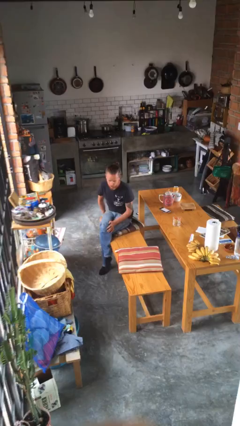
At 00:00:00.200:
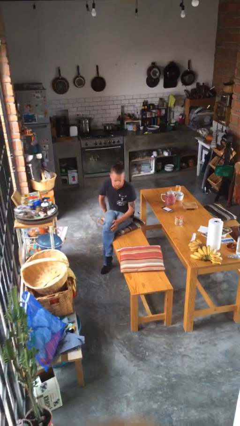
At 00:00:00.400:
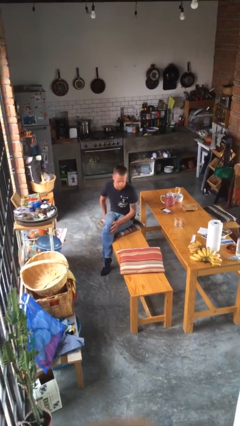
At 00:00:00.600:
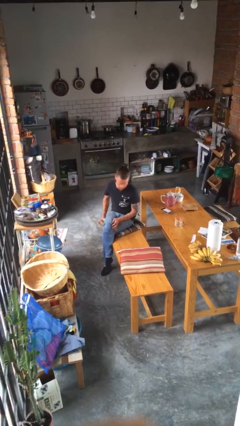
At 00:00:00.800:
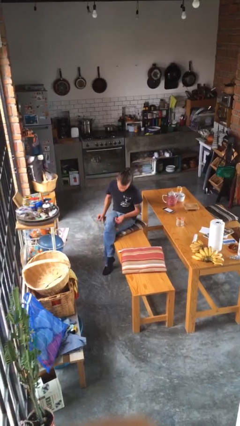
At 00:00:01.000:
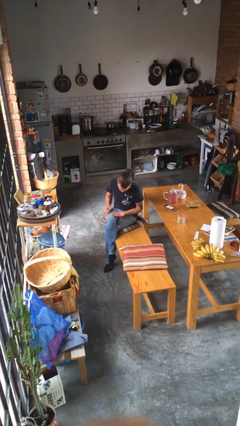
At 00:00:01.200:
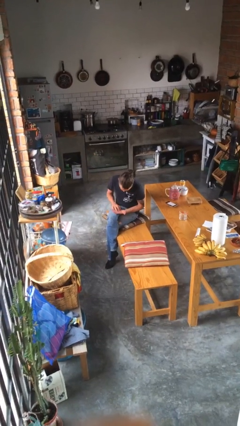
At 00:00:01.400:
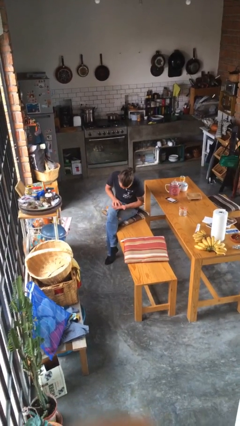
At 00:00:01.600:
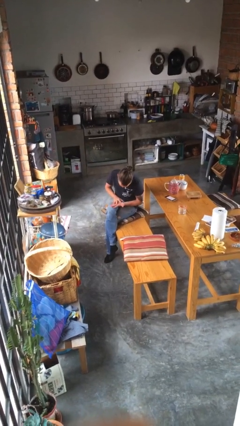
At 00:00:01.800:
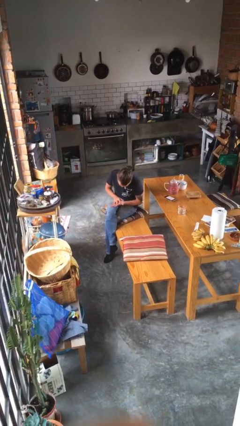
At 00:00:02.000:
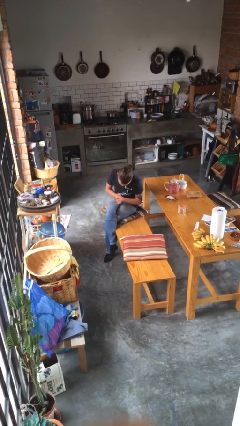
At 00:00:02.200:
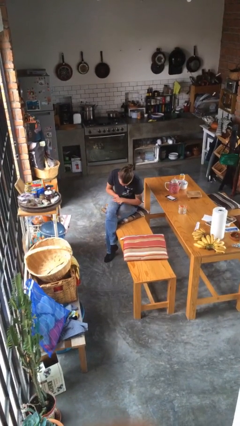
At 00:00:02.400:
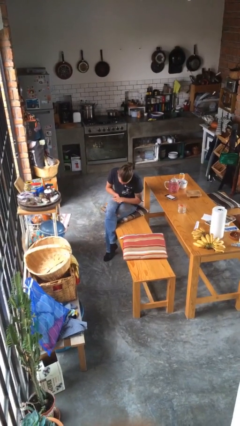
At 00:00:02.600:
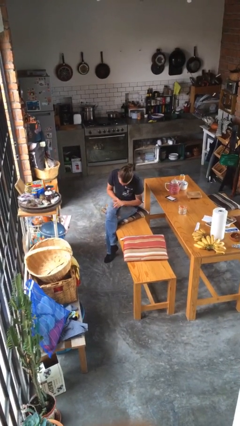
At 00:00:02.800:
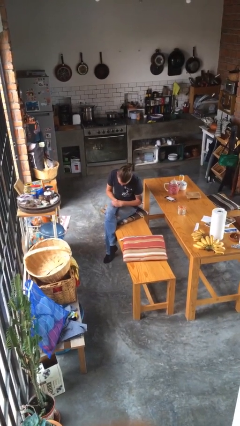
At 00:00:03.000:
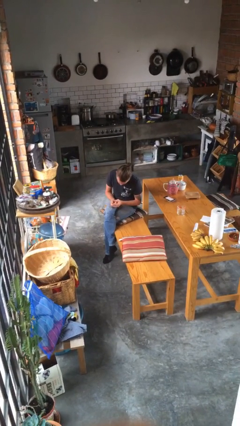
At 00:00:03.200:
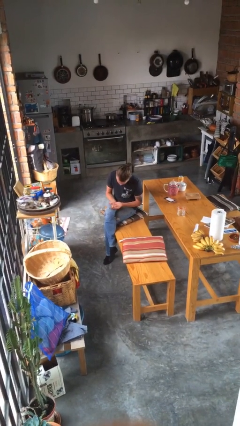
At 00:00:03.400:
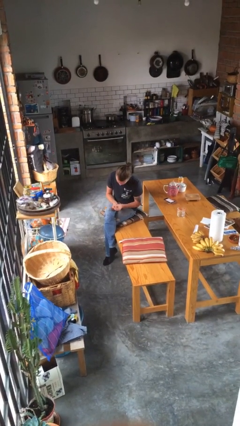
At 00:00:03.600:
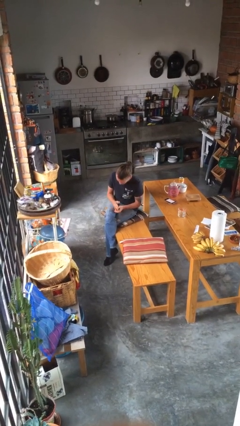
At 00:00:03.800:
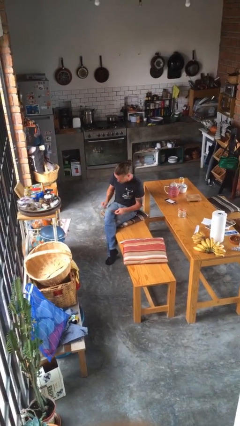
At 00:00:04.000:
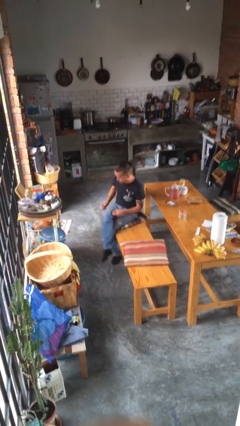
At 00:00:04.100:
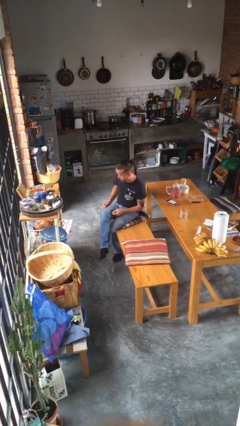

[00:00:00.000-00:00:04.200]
person looks at hands in lap

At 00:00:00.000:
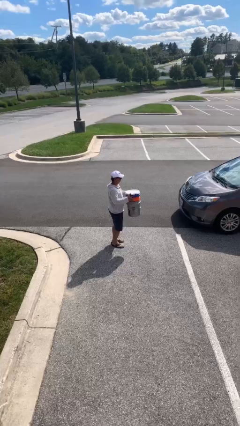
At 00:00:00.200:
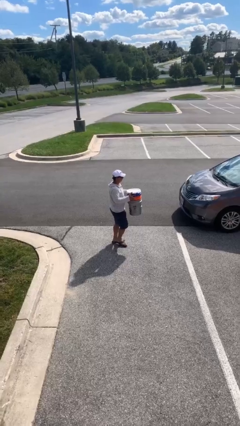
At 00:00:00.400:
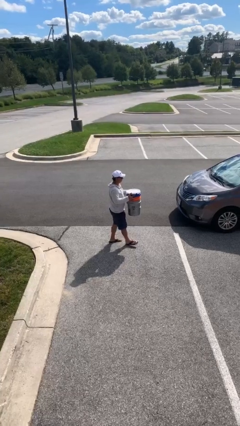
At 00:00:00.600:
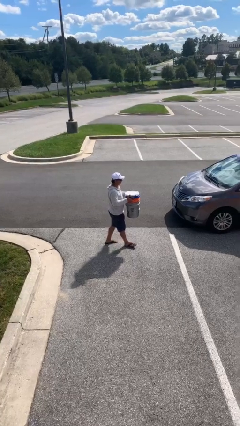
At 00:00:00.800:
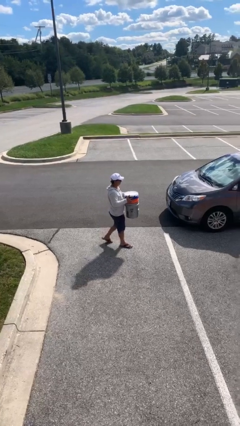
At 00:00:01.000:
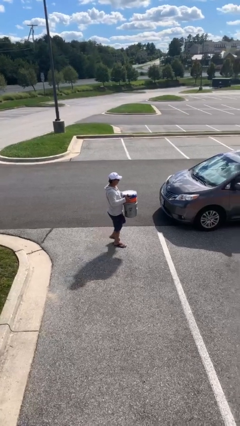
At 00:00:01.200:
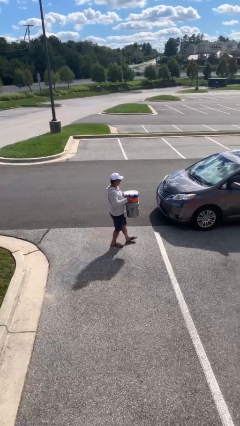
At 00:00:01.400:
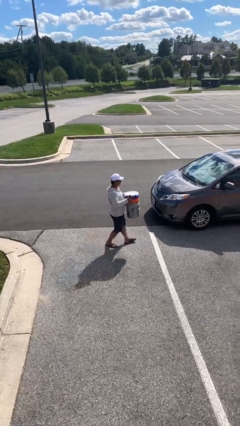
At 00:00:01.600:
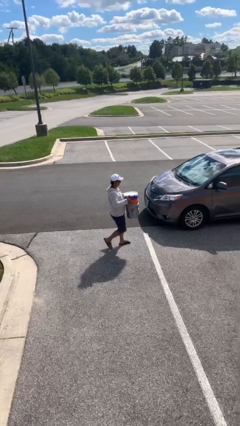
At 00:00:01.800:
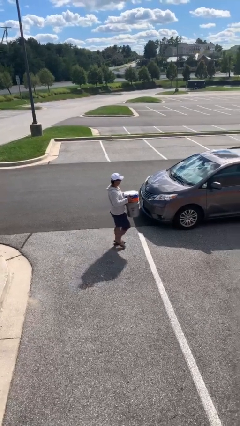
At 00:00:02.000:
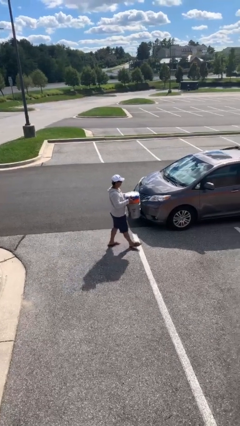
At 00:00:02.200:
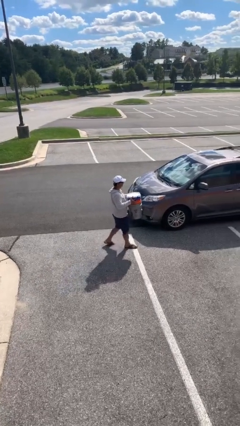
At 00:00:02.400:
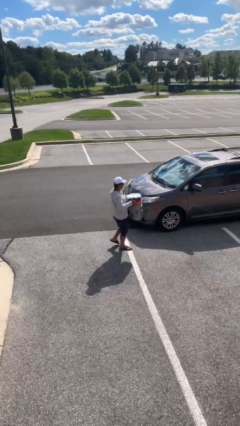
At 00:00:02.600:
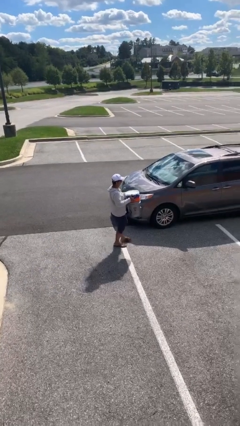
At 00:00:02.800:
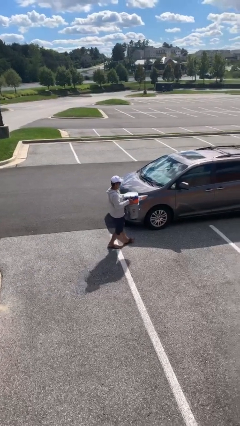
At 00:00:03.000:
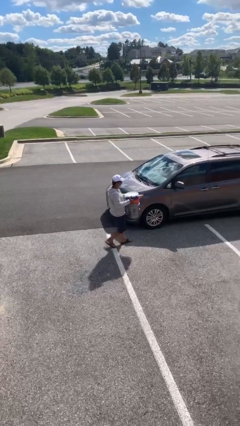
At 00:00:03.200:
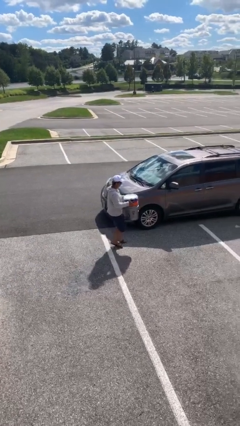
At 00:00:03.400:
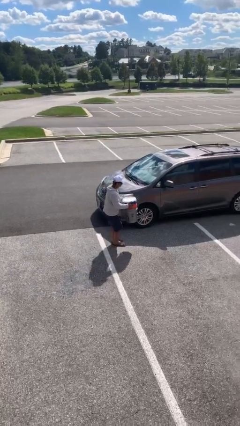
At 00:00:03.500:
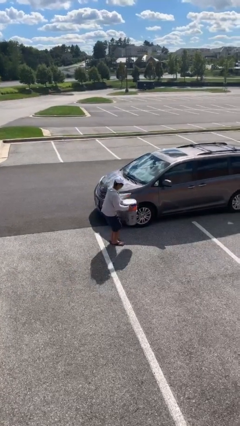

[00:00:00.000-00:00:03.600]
person carries heavy object

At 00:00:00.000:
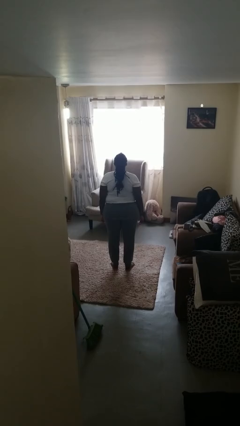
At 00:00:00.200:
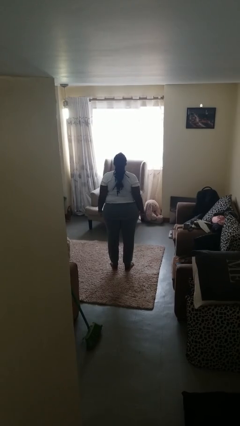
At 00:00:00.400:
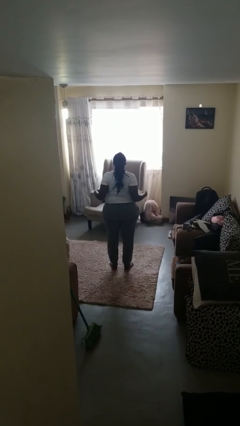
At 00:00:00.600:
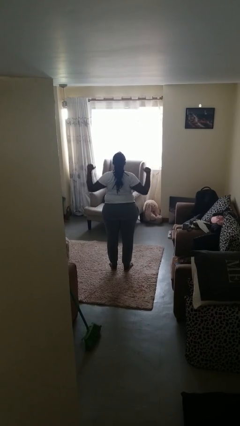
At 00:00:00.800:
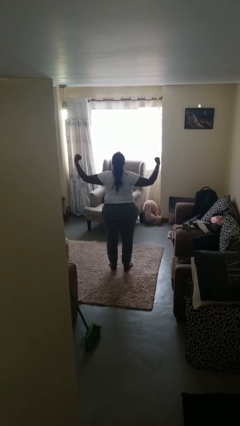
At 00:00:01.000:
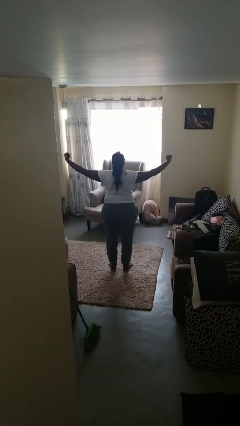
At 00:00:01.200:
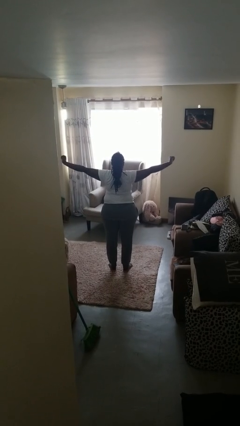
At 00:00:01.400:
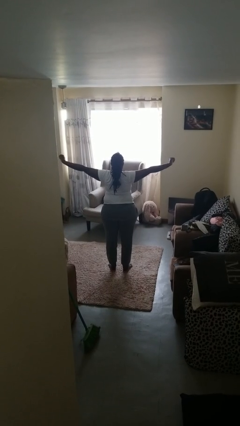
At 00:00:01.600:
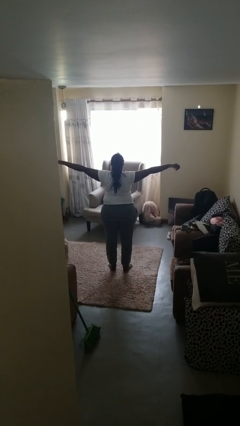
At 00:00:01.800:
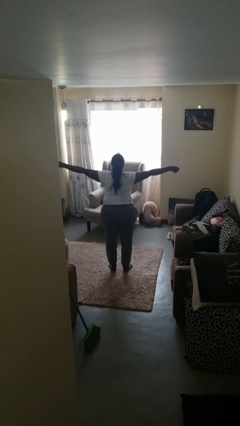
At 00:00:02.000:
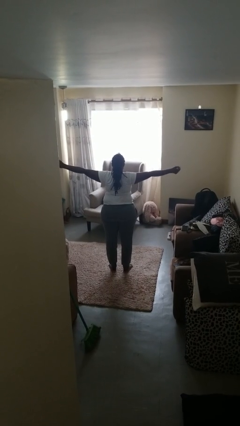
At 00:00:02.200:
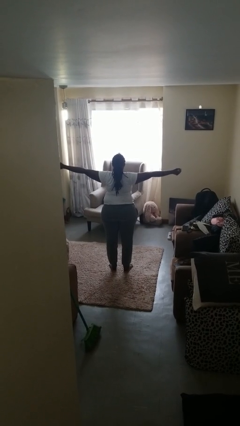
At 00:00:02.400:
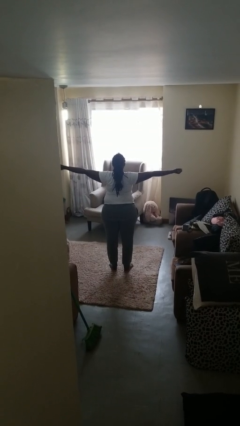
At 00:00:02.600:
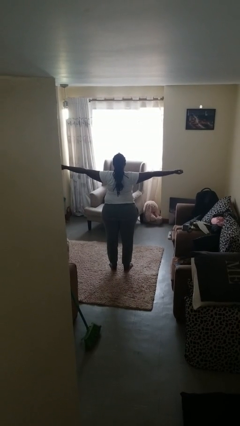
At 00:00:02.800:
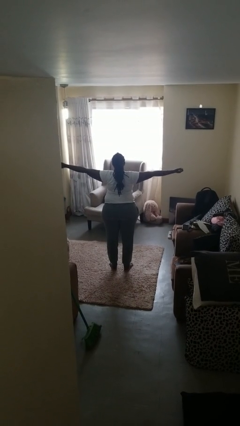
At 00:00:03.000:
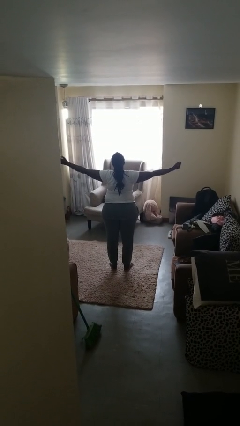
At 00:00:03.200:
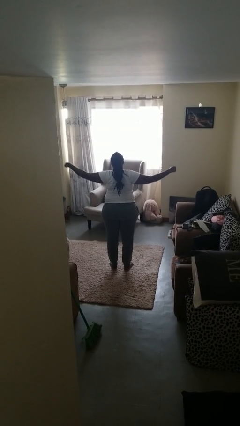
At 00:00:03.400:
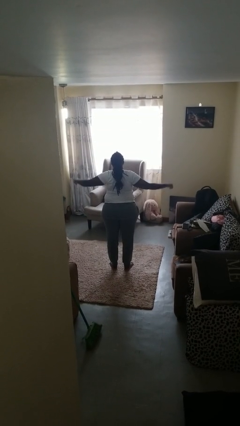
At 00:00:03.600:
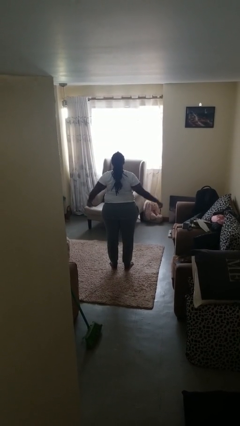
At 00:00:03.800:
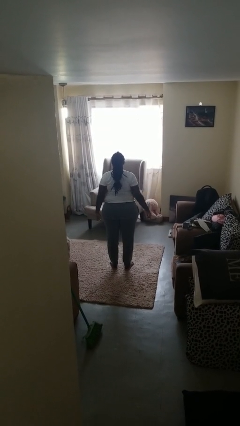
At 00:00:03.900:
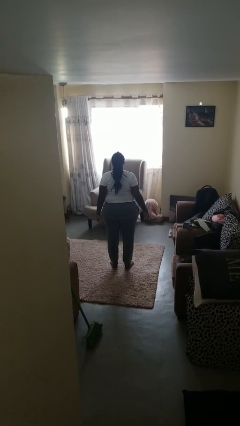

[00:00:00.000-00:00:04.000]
person stretches arms to side

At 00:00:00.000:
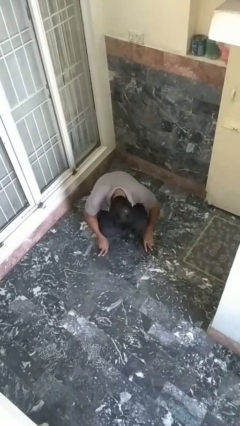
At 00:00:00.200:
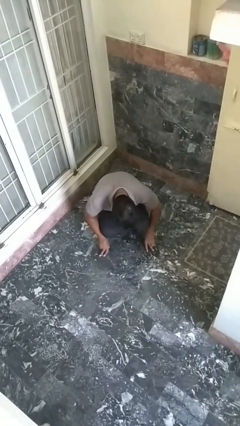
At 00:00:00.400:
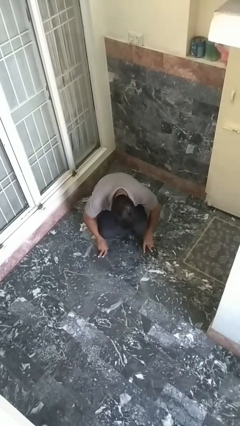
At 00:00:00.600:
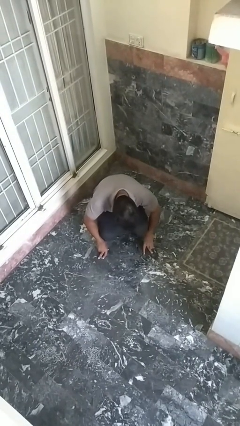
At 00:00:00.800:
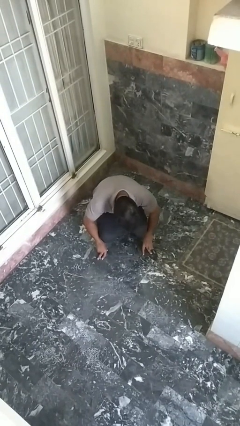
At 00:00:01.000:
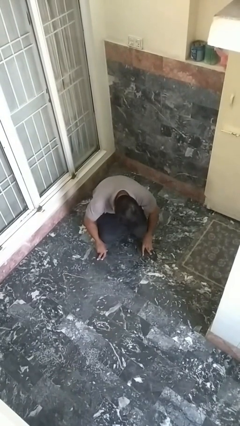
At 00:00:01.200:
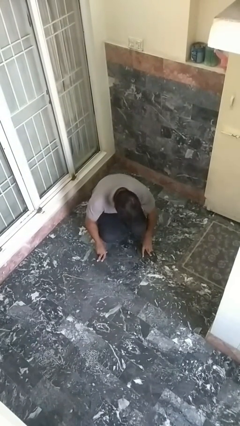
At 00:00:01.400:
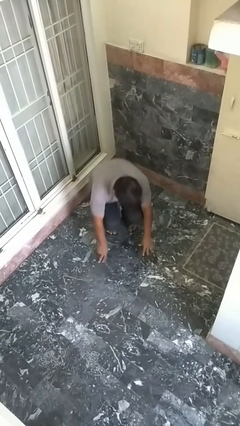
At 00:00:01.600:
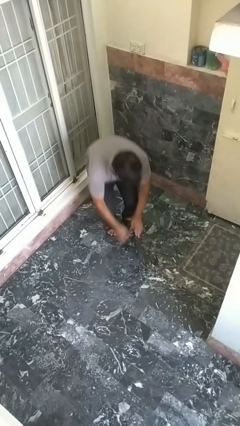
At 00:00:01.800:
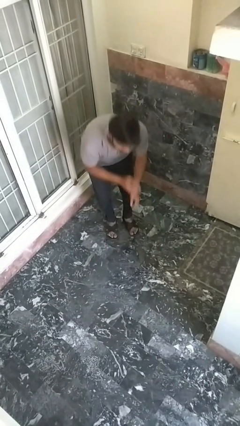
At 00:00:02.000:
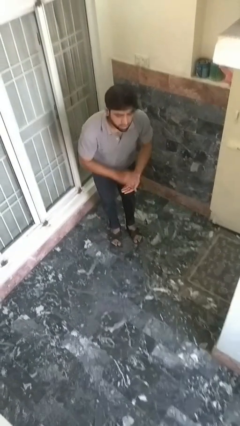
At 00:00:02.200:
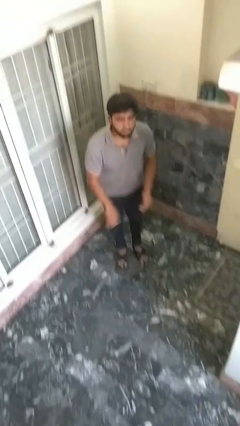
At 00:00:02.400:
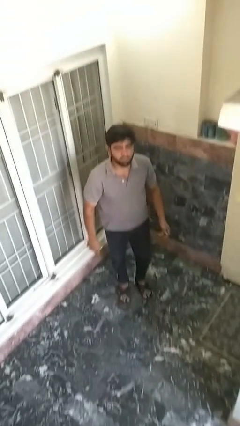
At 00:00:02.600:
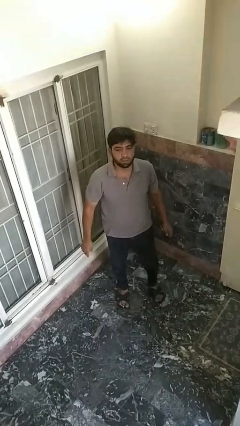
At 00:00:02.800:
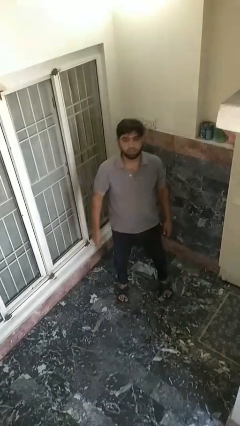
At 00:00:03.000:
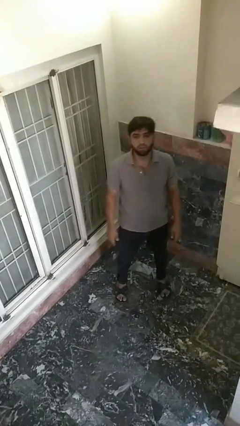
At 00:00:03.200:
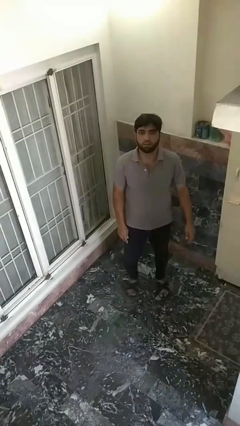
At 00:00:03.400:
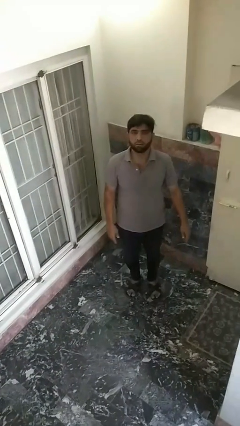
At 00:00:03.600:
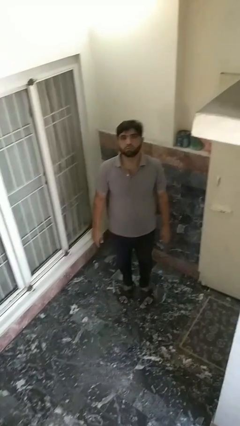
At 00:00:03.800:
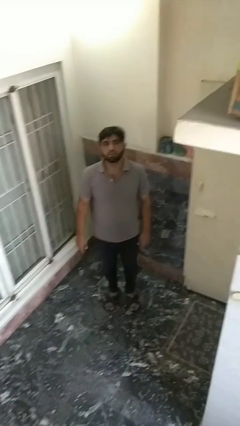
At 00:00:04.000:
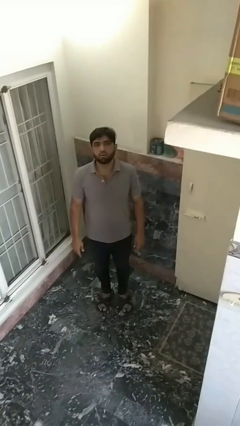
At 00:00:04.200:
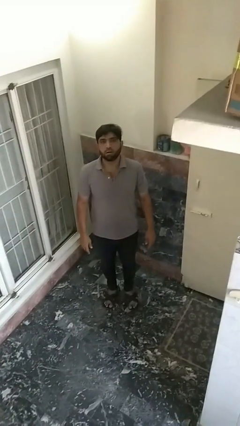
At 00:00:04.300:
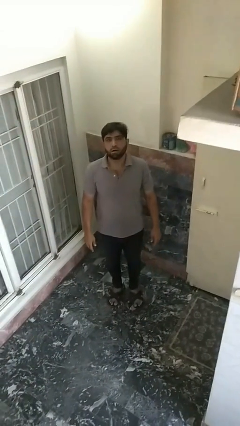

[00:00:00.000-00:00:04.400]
person stands up from floor

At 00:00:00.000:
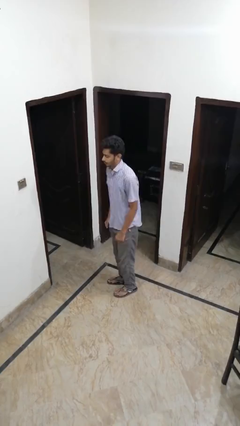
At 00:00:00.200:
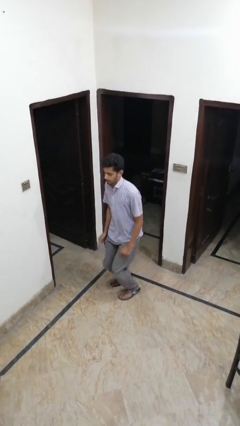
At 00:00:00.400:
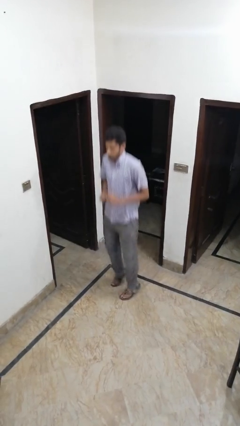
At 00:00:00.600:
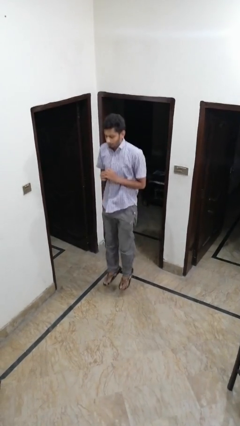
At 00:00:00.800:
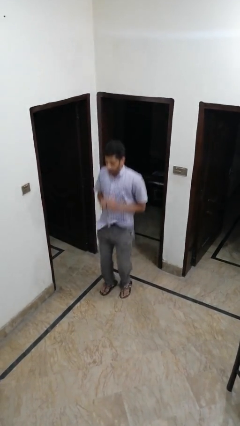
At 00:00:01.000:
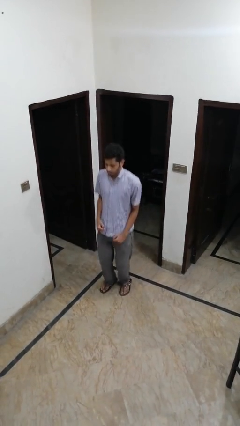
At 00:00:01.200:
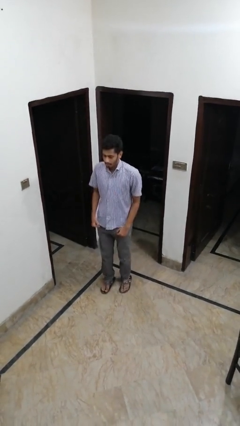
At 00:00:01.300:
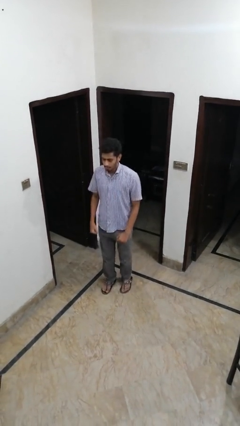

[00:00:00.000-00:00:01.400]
person jumps
